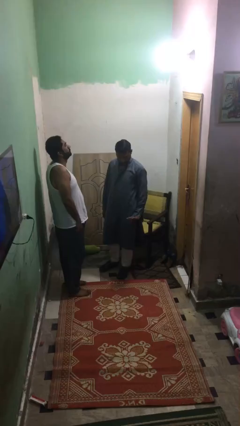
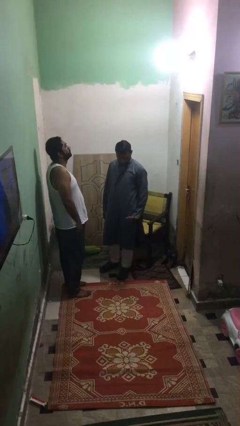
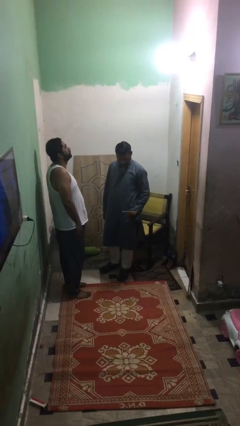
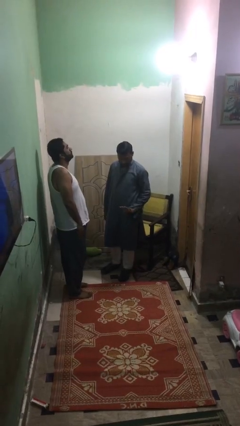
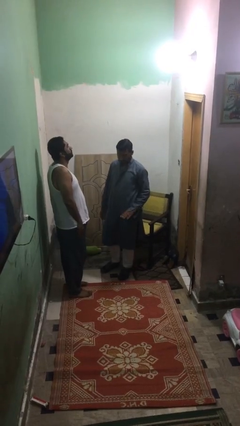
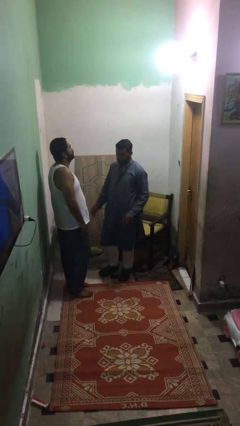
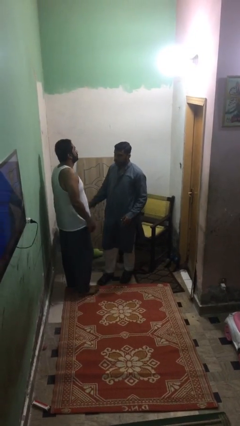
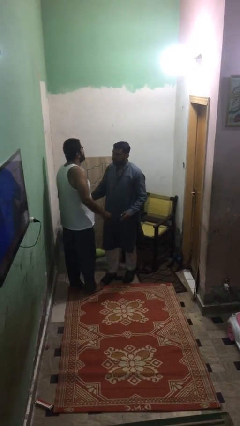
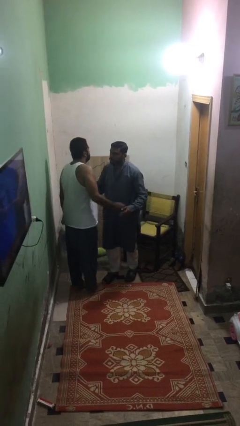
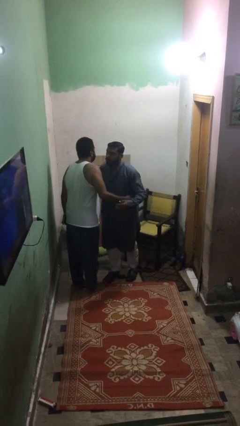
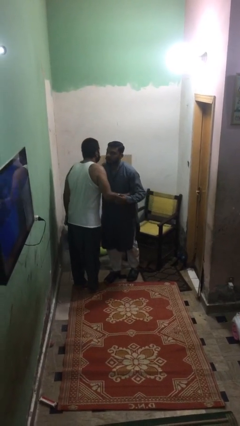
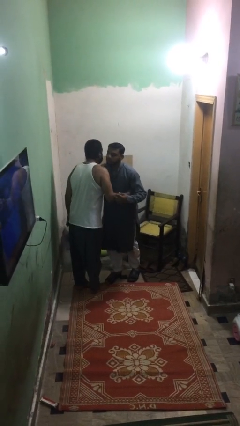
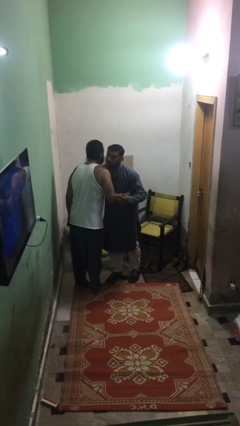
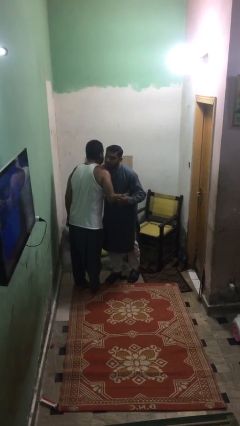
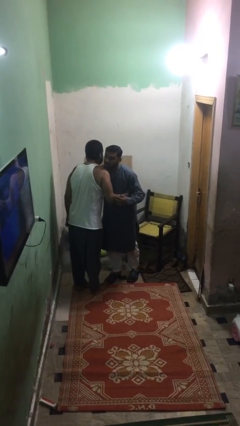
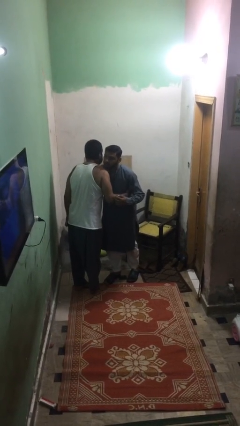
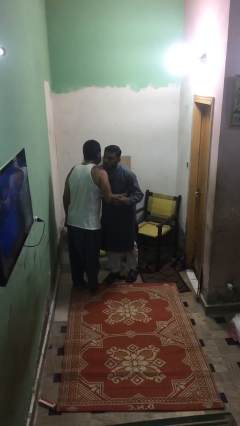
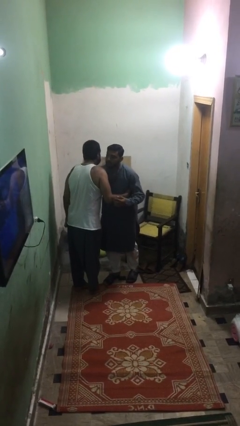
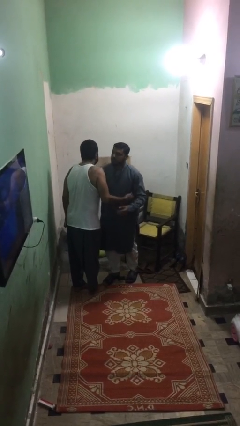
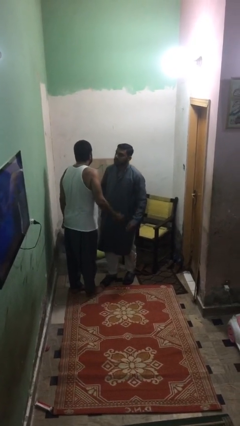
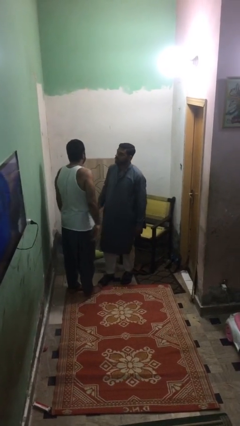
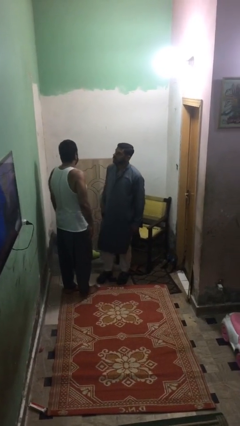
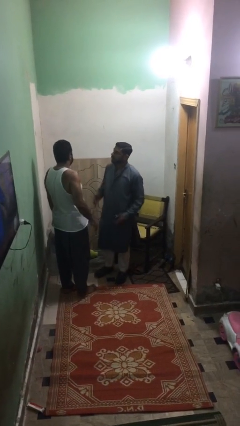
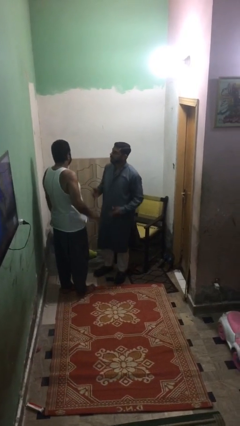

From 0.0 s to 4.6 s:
person embraces person

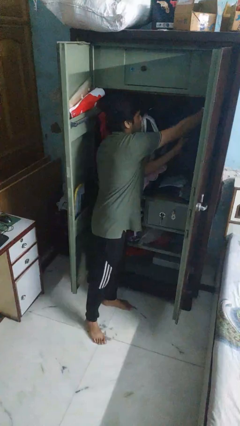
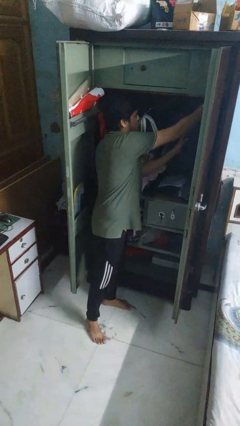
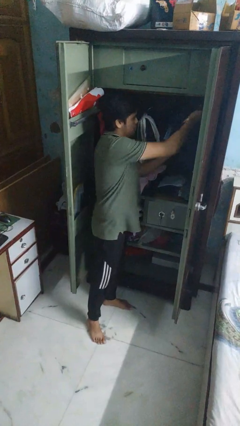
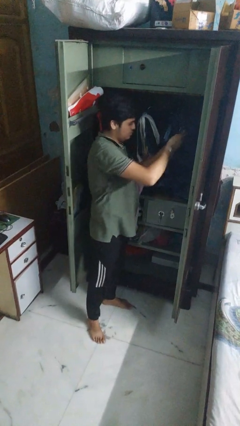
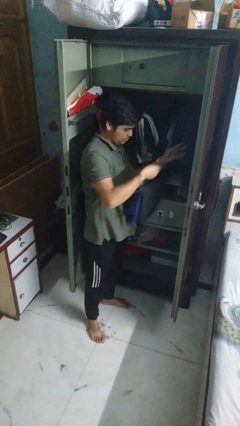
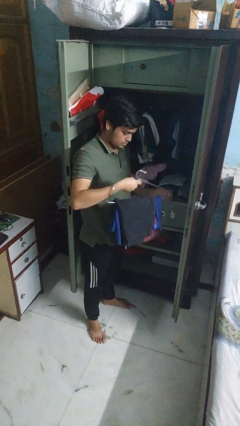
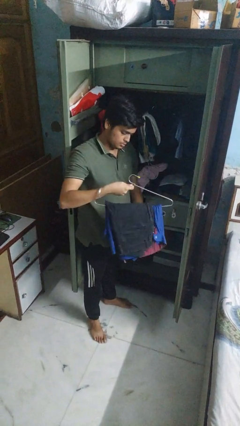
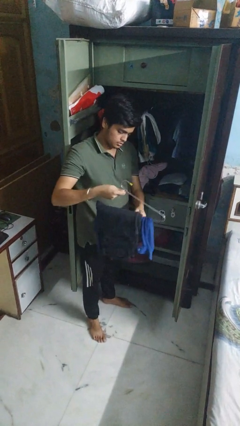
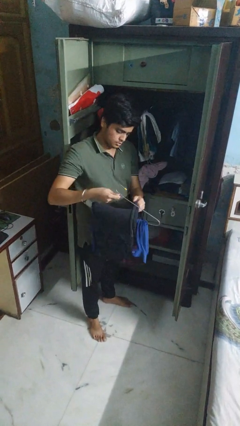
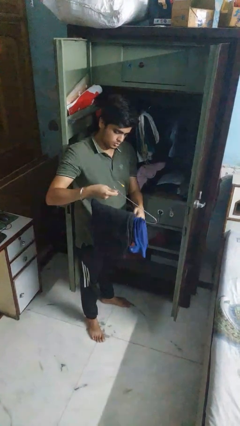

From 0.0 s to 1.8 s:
person takes clothes from closet

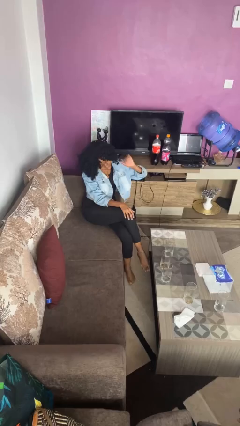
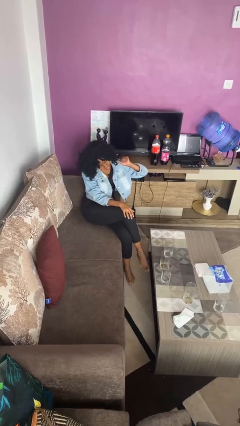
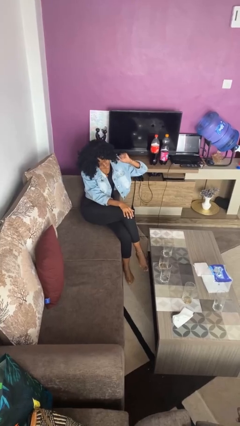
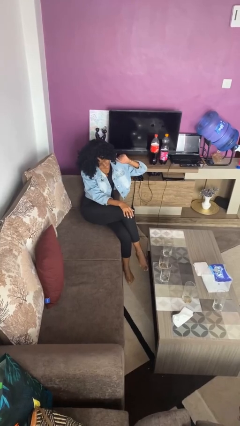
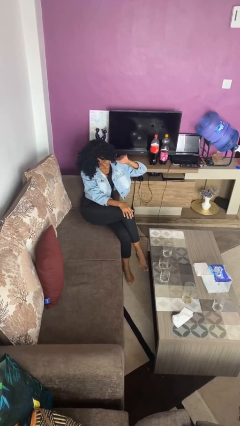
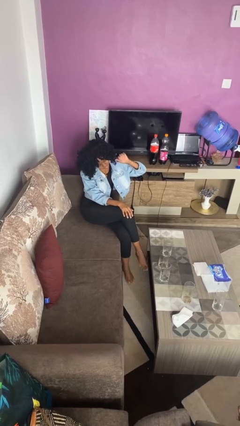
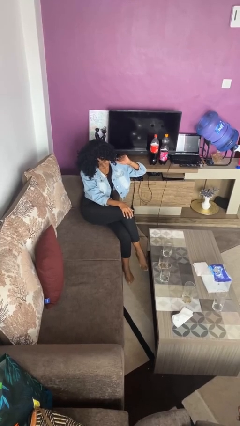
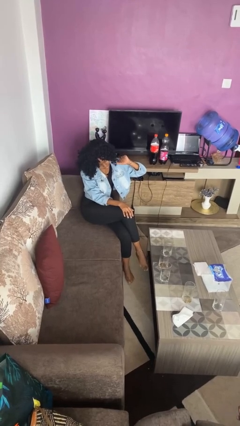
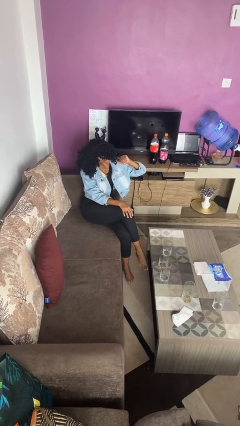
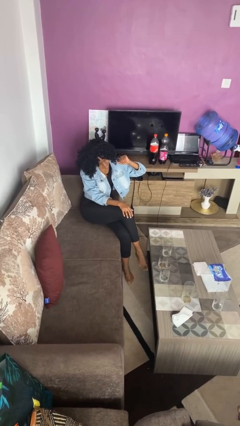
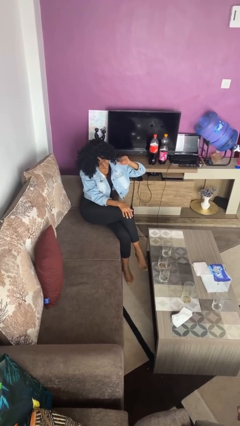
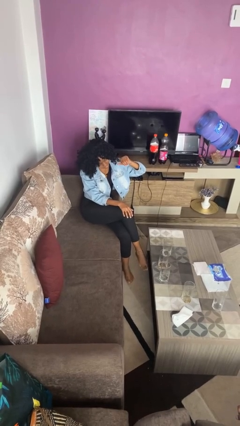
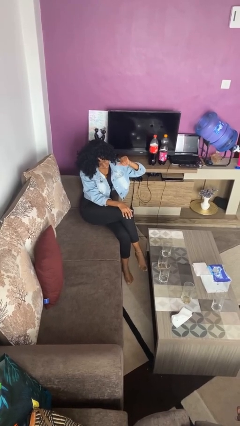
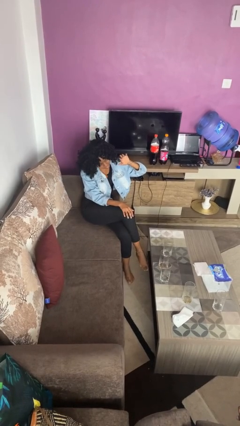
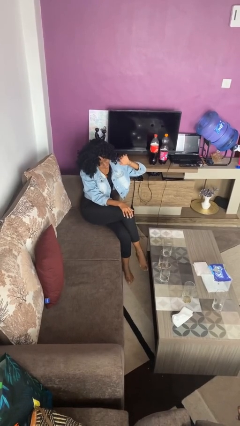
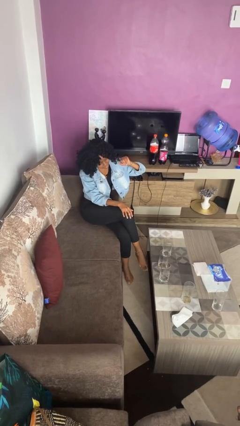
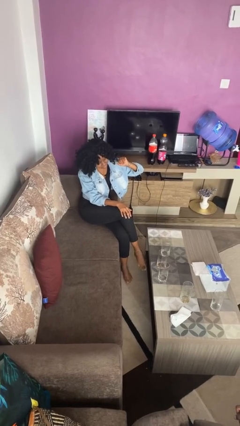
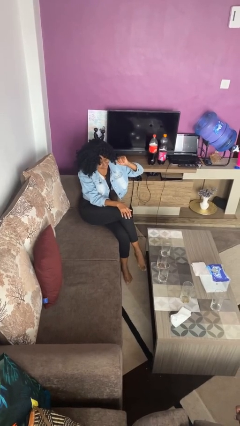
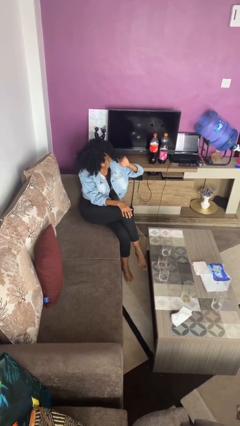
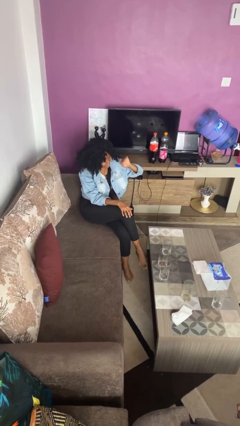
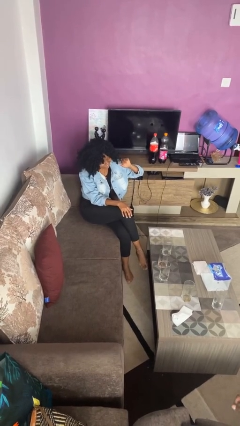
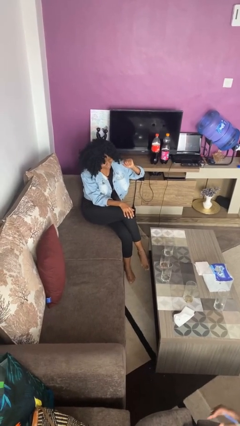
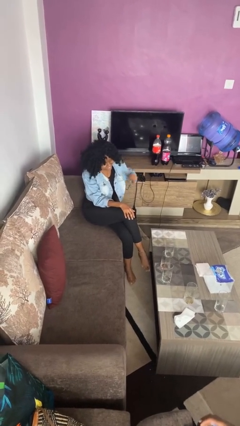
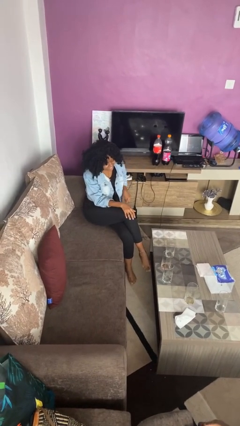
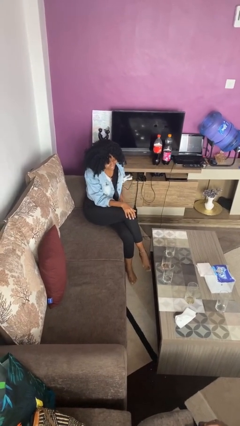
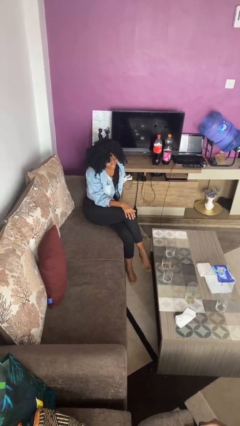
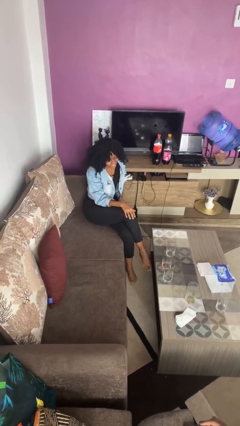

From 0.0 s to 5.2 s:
person gestures come here

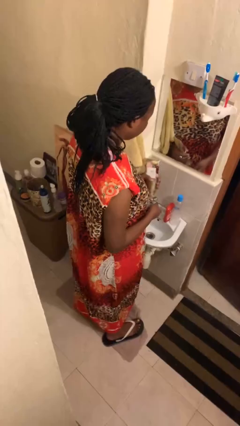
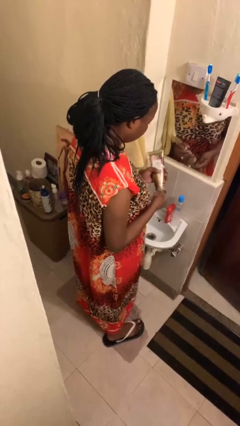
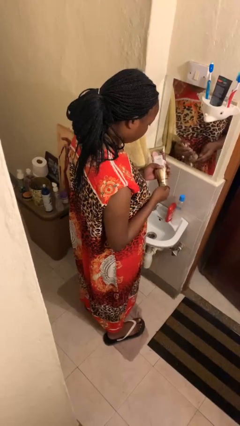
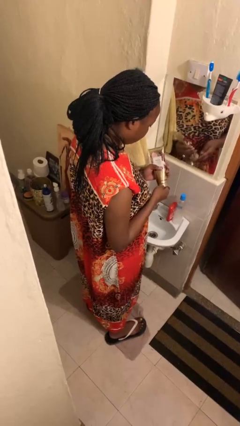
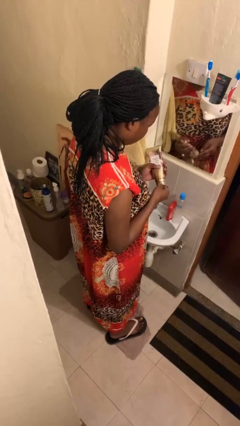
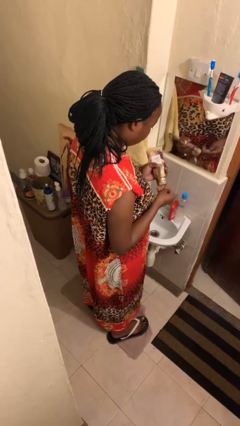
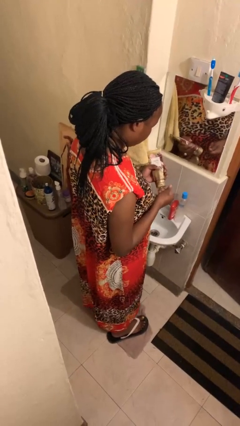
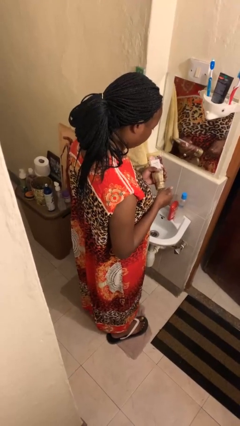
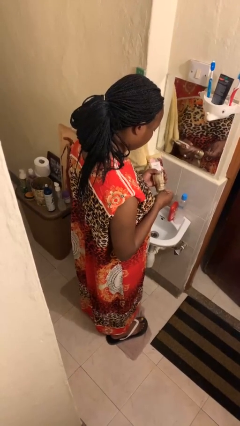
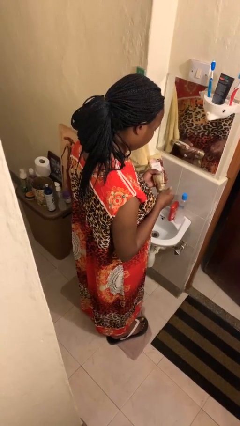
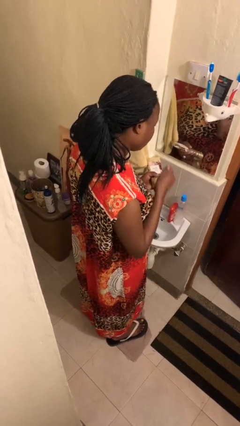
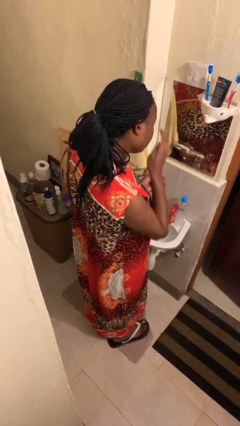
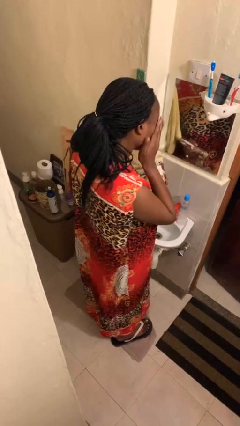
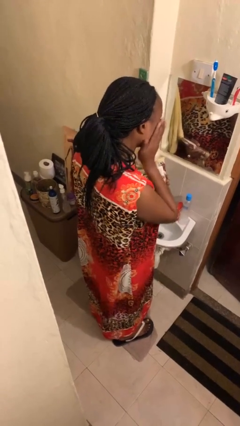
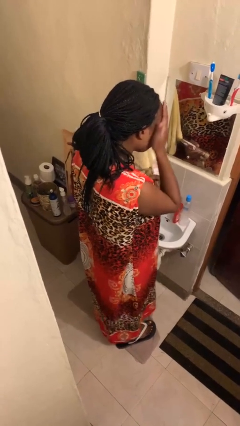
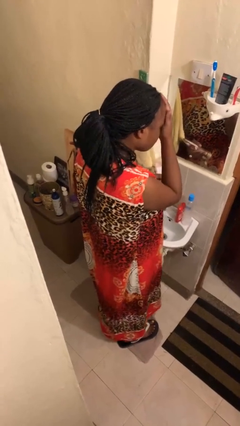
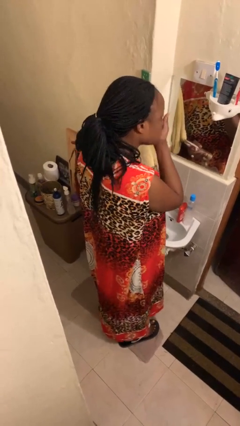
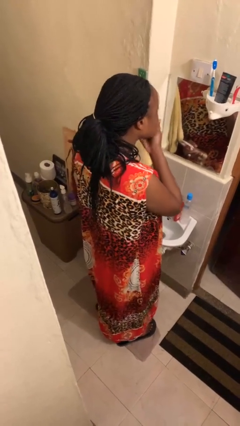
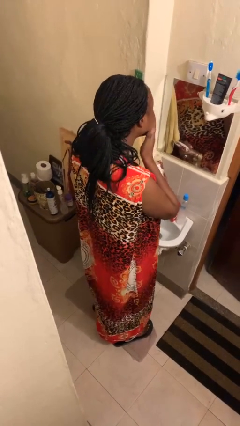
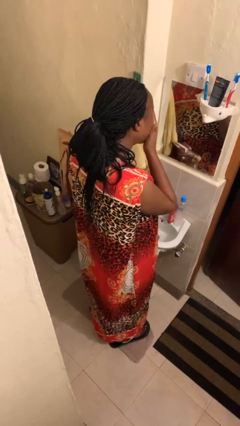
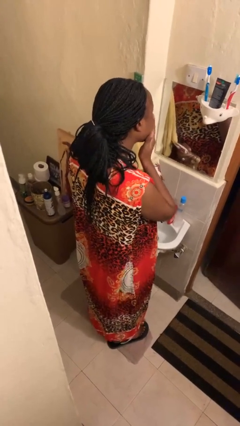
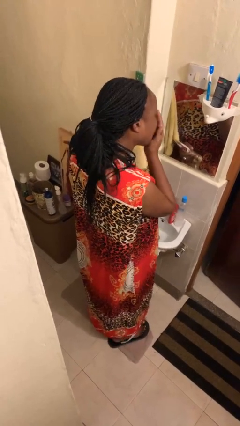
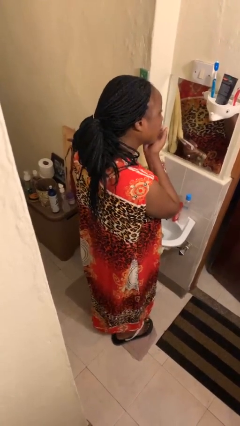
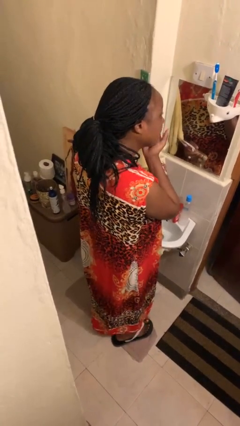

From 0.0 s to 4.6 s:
person applies facial moisturizer

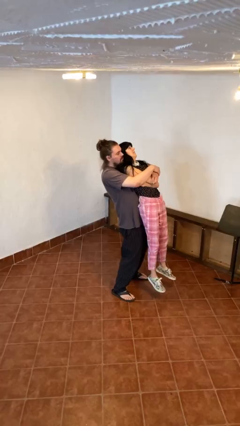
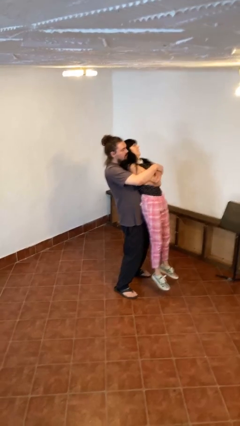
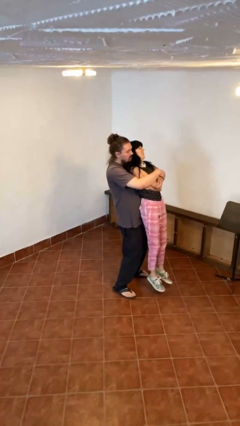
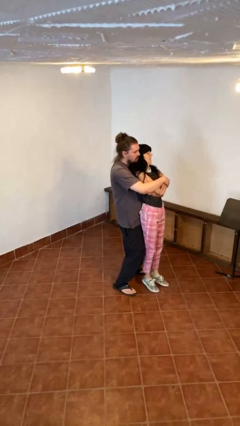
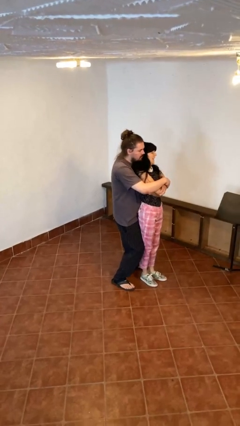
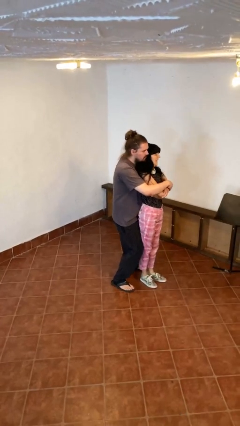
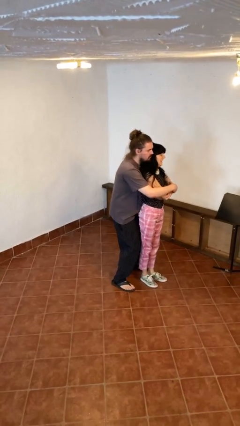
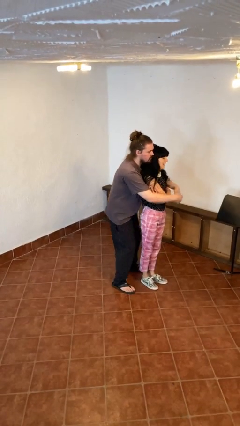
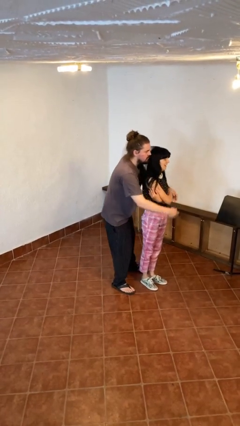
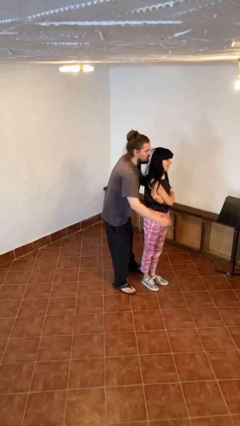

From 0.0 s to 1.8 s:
person puts down person
